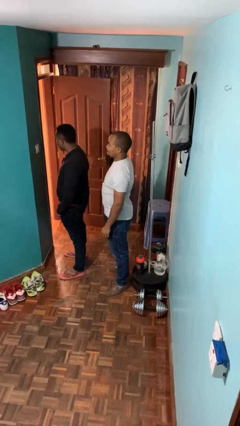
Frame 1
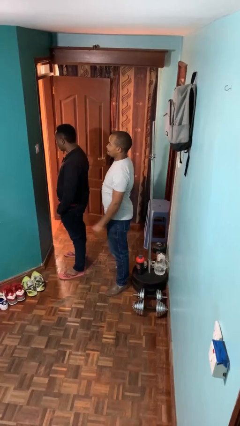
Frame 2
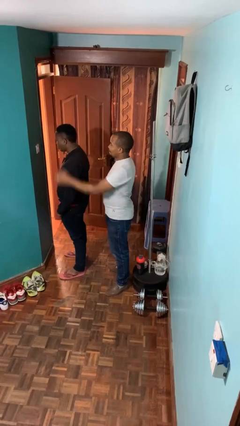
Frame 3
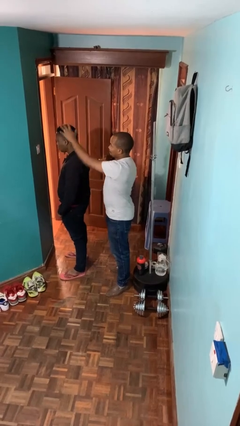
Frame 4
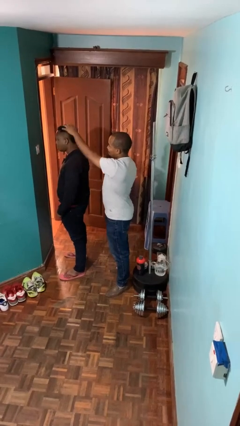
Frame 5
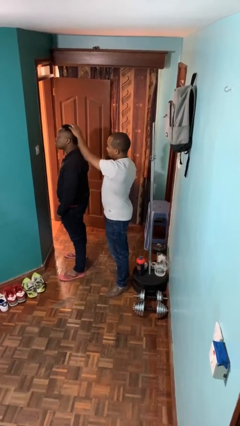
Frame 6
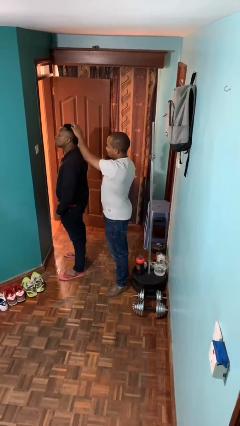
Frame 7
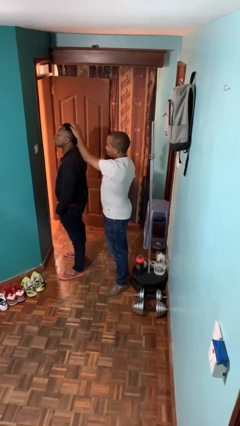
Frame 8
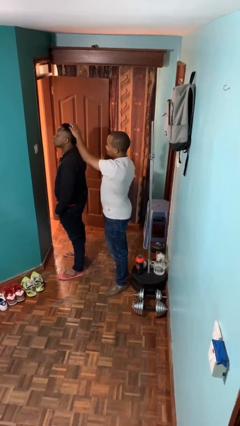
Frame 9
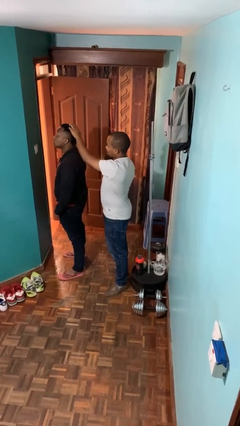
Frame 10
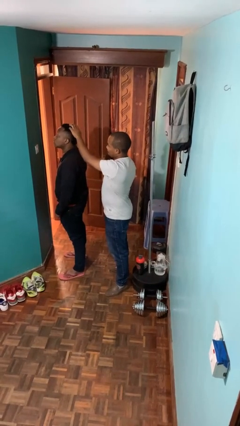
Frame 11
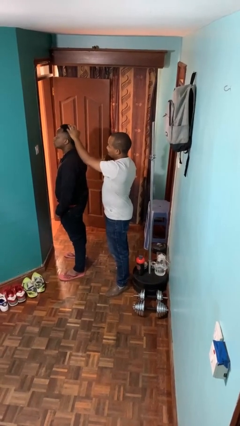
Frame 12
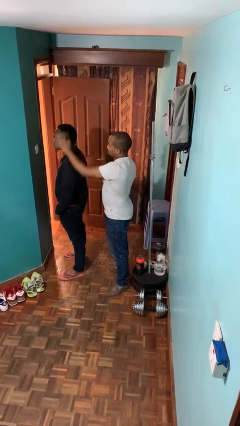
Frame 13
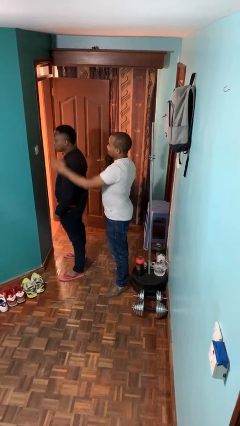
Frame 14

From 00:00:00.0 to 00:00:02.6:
person grabs person by hair

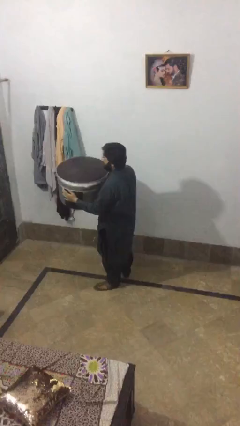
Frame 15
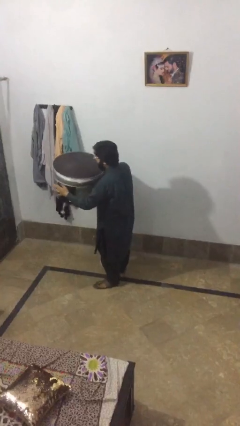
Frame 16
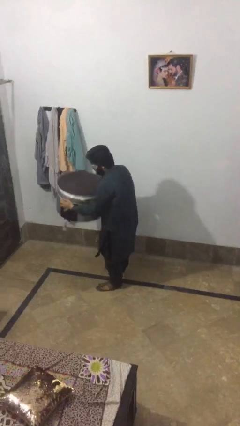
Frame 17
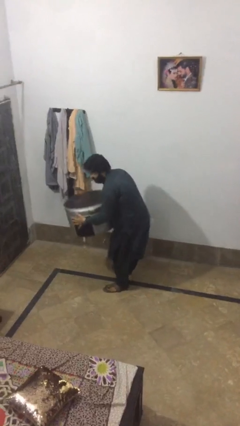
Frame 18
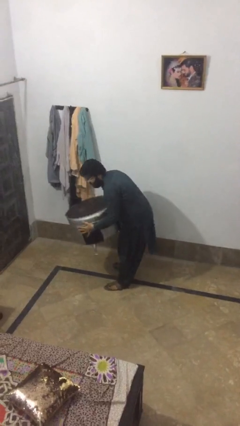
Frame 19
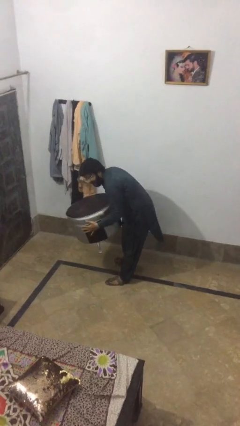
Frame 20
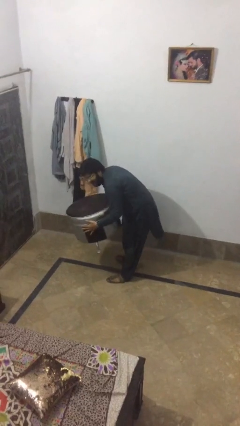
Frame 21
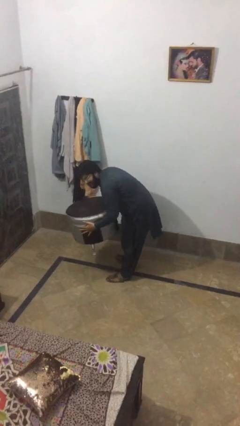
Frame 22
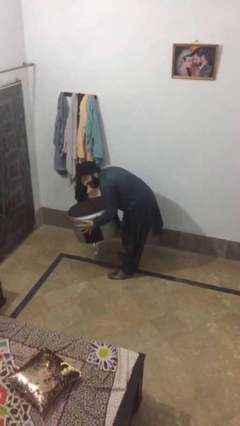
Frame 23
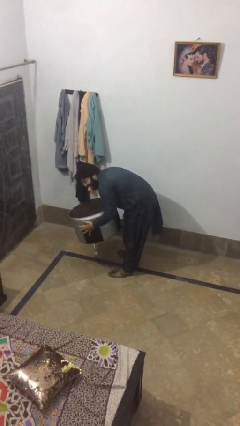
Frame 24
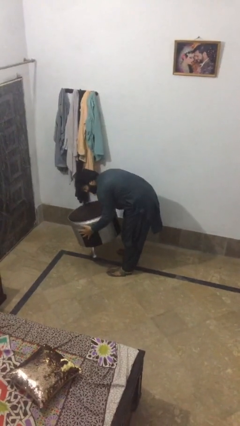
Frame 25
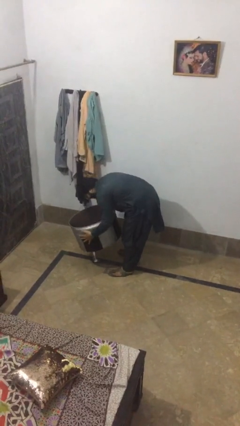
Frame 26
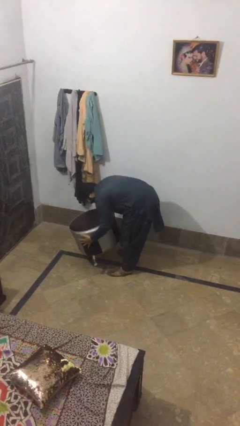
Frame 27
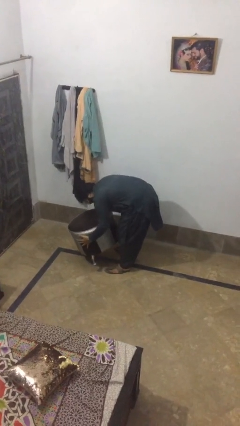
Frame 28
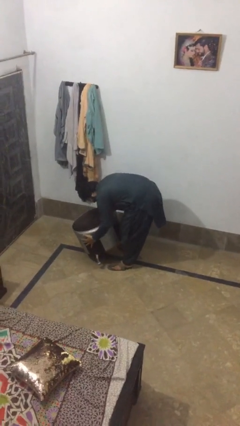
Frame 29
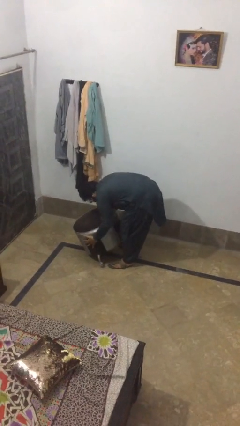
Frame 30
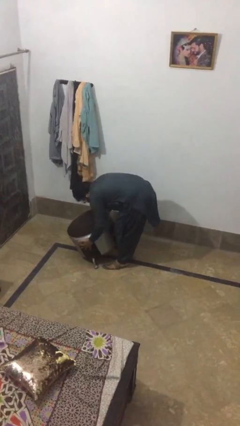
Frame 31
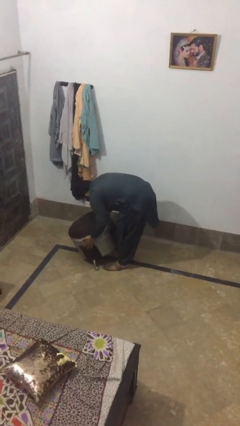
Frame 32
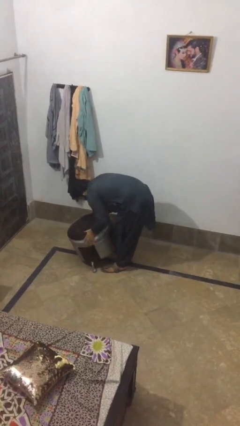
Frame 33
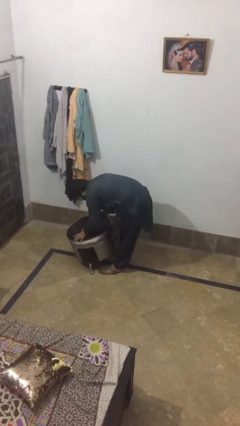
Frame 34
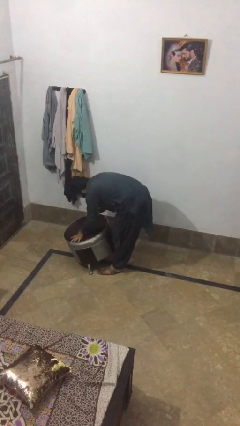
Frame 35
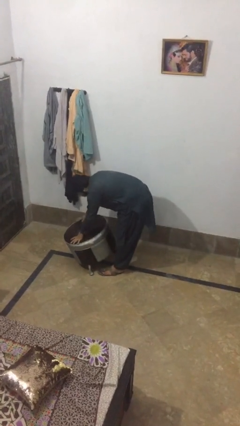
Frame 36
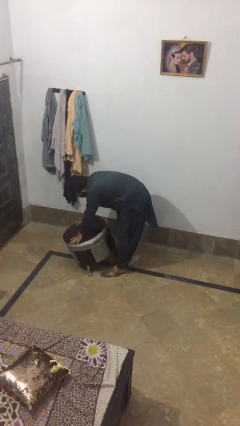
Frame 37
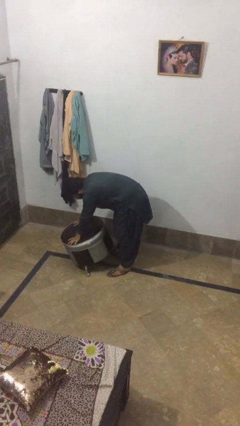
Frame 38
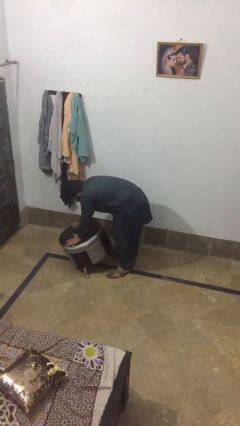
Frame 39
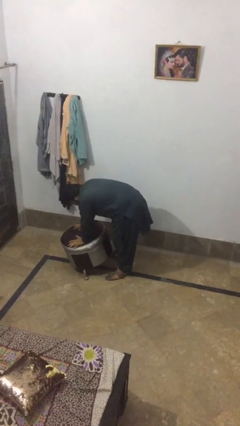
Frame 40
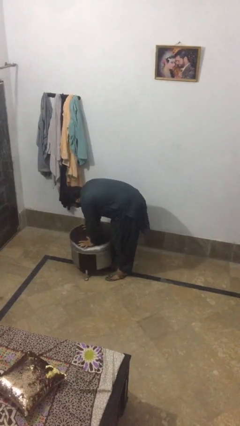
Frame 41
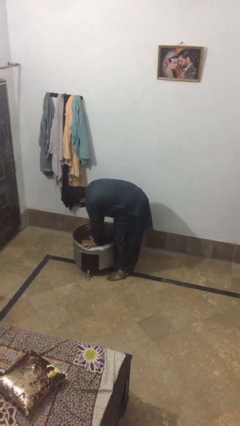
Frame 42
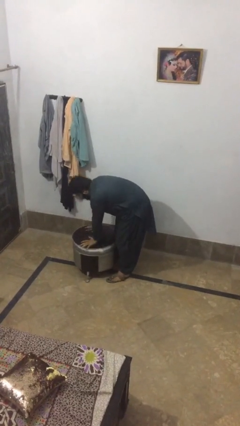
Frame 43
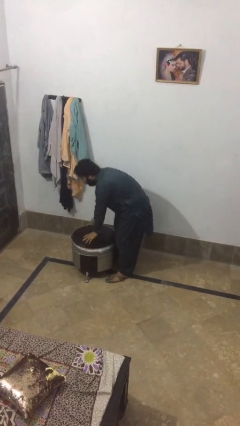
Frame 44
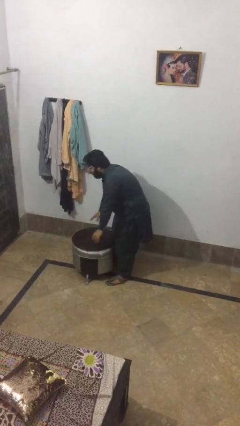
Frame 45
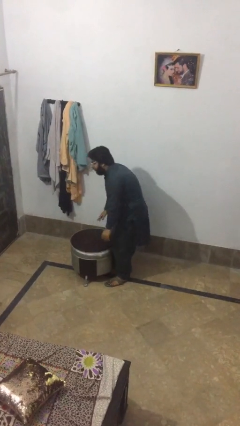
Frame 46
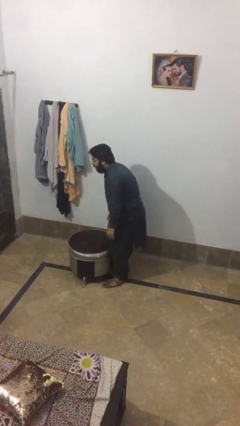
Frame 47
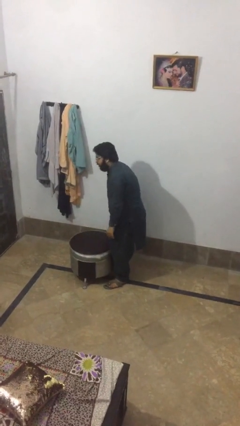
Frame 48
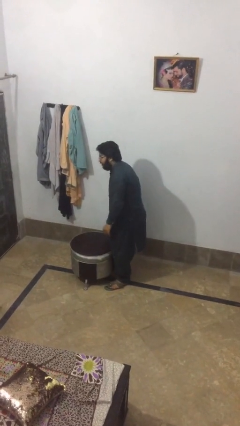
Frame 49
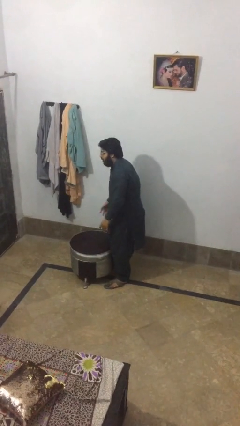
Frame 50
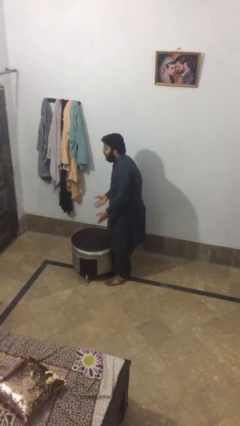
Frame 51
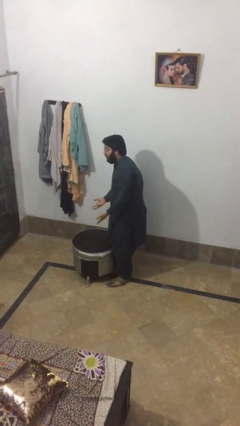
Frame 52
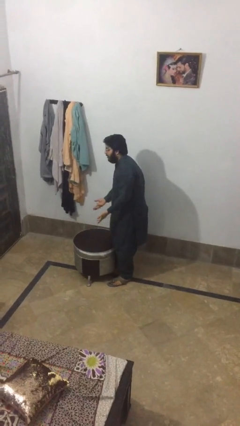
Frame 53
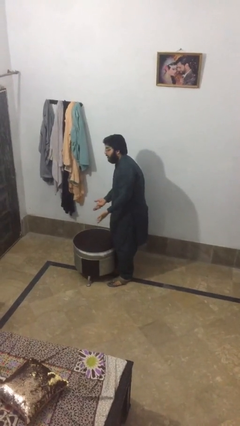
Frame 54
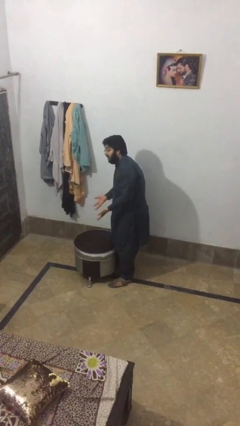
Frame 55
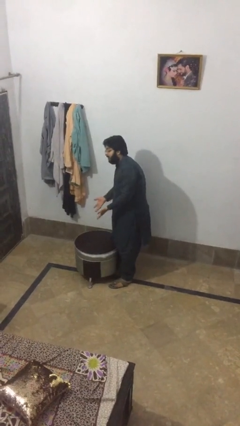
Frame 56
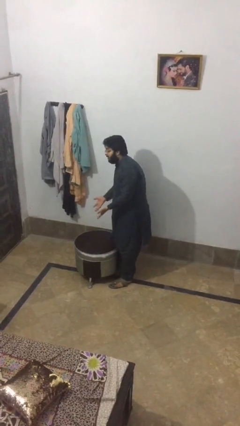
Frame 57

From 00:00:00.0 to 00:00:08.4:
person puts down object on floor

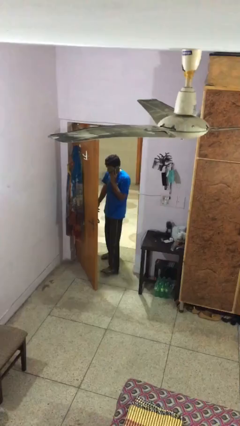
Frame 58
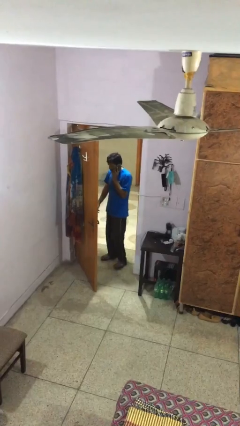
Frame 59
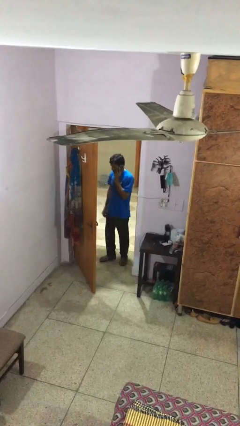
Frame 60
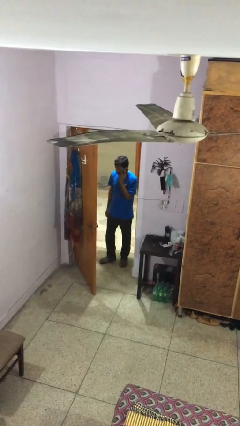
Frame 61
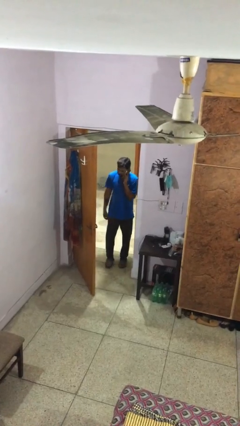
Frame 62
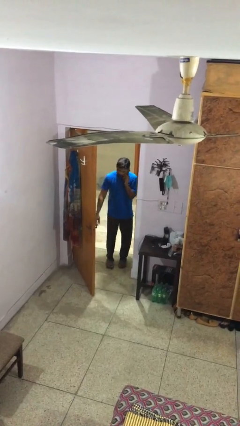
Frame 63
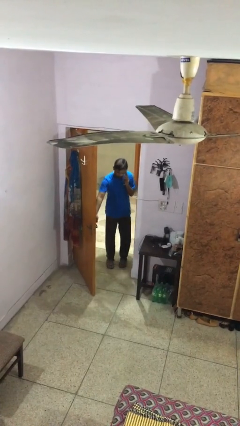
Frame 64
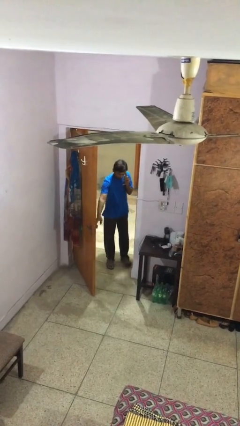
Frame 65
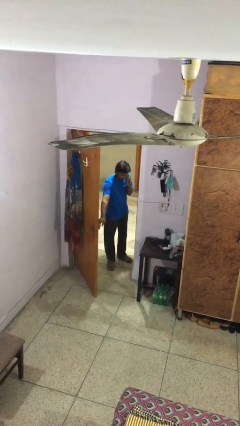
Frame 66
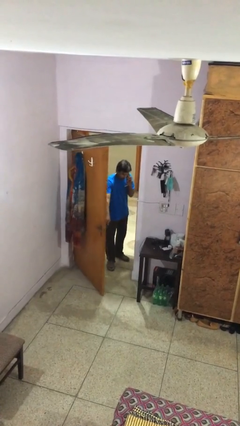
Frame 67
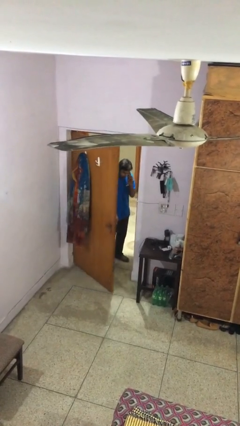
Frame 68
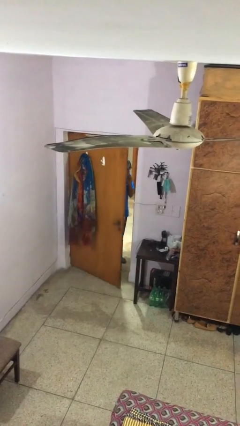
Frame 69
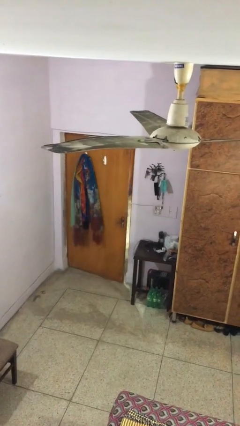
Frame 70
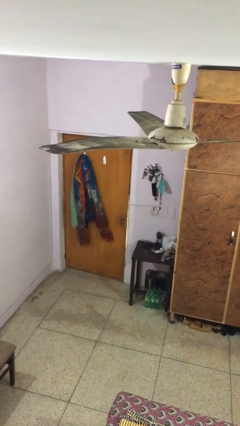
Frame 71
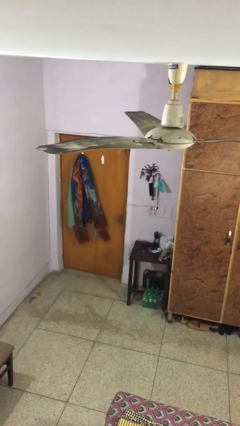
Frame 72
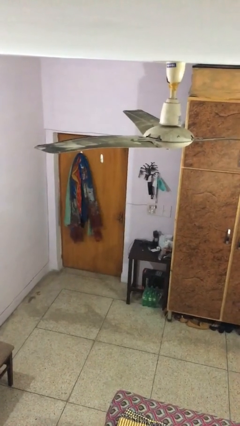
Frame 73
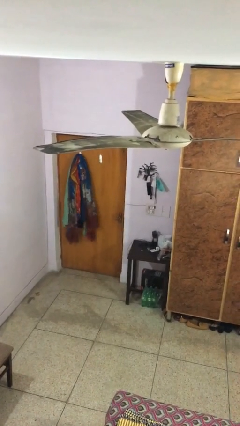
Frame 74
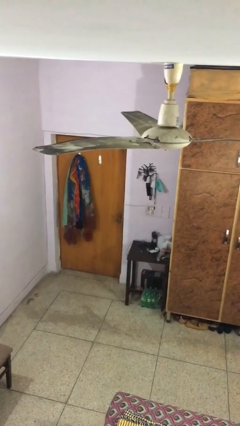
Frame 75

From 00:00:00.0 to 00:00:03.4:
person closes facility door

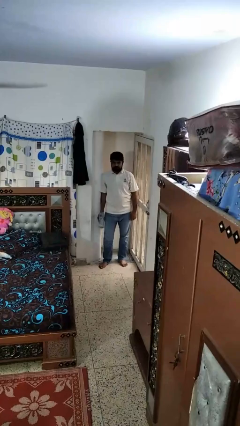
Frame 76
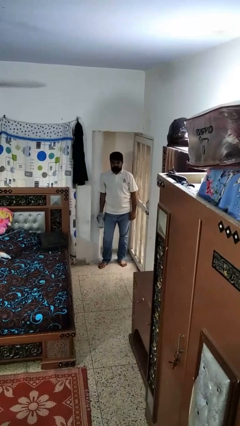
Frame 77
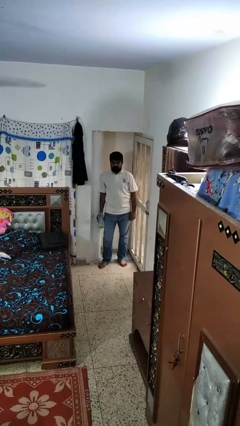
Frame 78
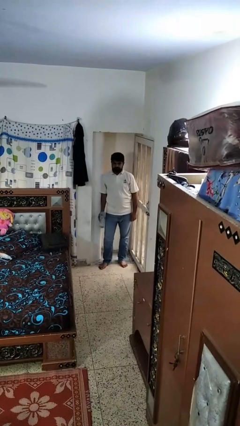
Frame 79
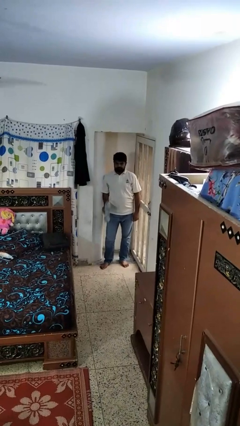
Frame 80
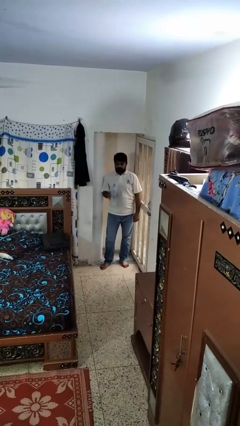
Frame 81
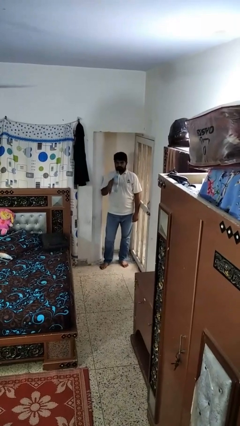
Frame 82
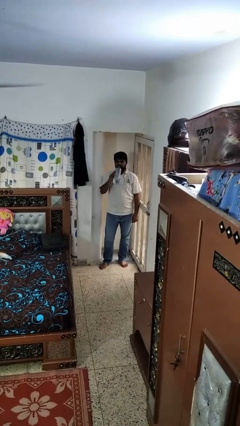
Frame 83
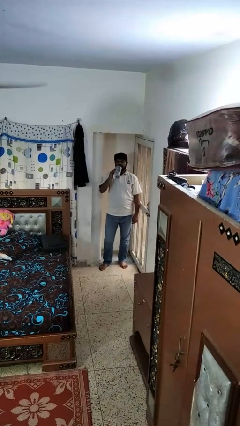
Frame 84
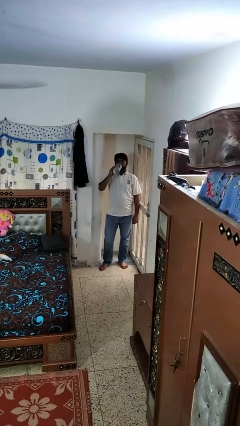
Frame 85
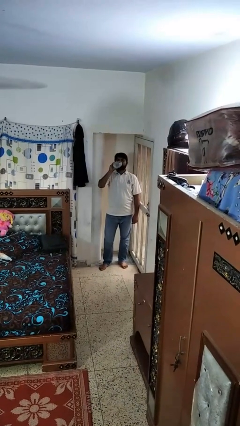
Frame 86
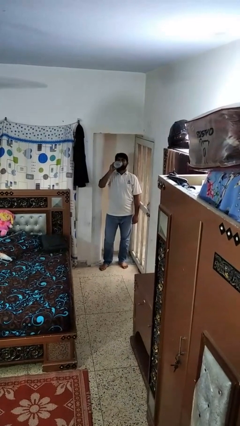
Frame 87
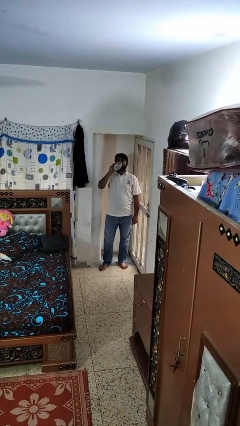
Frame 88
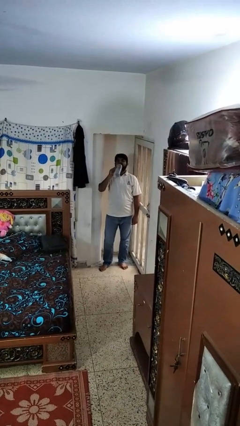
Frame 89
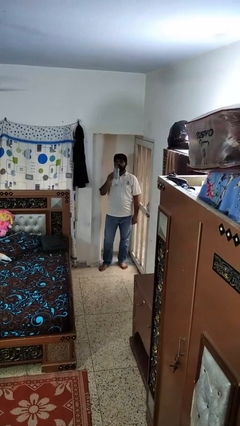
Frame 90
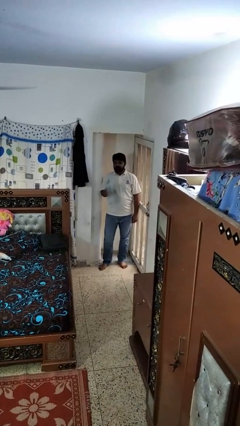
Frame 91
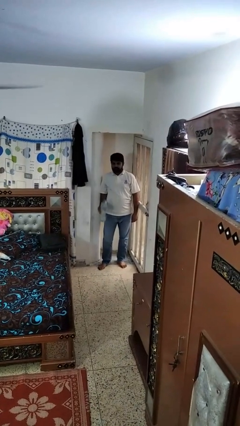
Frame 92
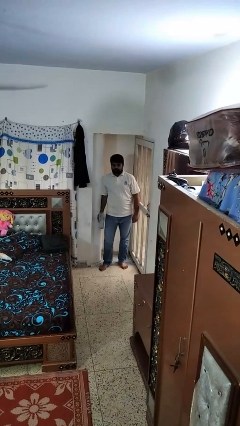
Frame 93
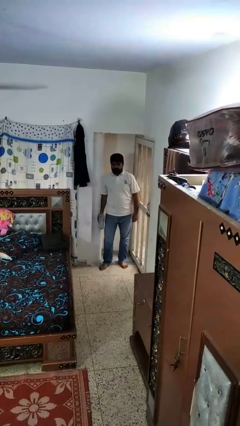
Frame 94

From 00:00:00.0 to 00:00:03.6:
person drinks from bottle
